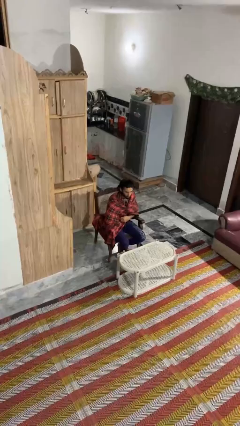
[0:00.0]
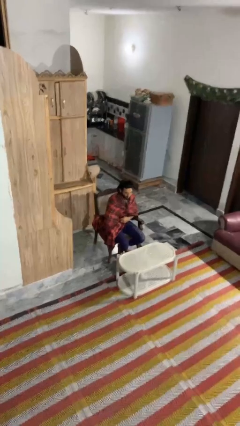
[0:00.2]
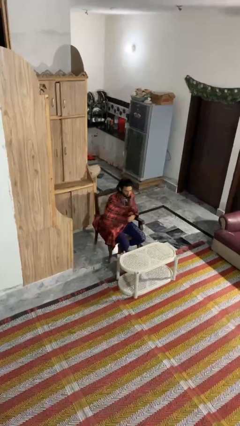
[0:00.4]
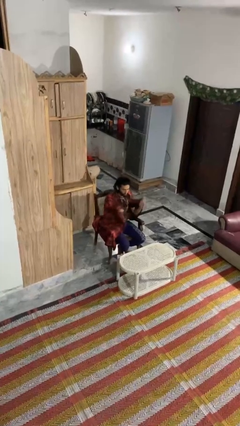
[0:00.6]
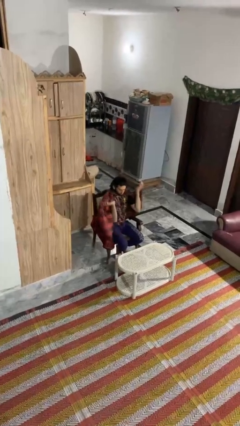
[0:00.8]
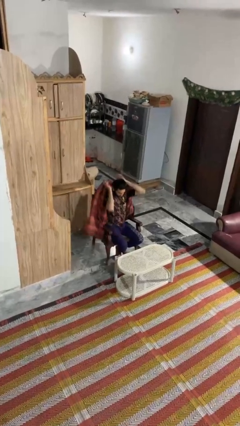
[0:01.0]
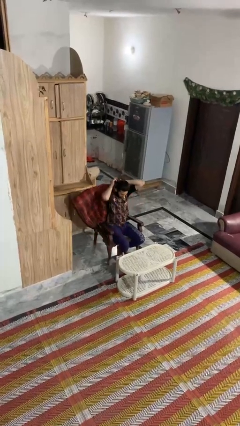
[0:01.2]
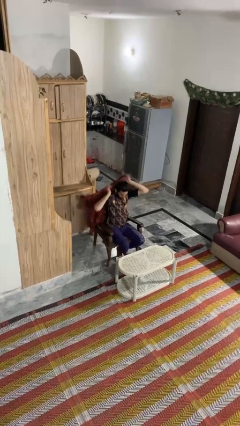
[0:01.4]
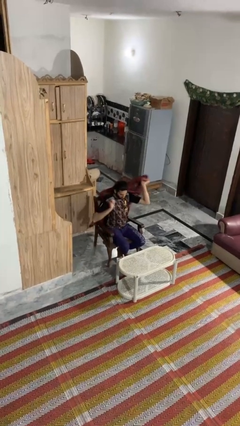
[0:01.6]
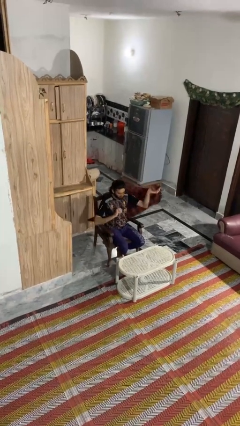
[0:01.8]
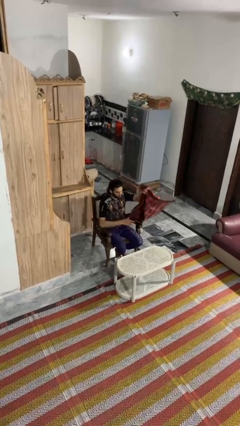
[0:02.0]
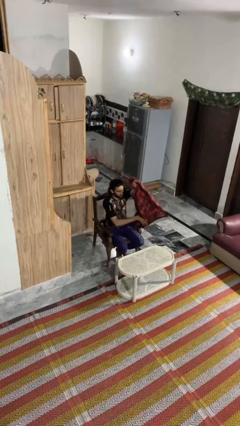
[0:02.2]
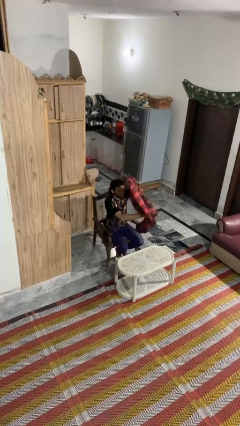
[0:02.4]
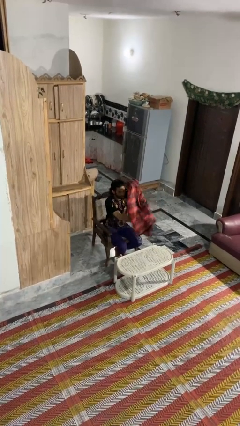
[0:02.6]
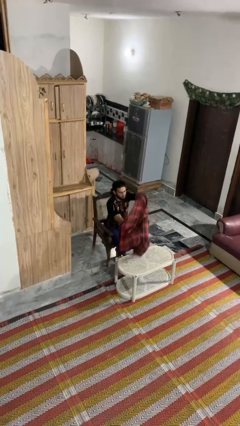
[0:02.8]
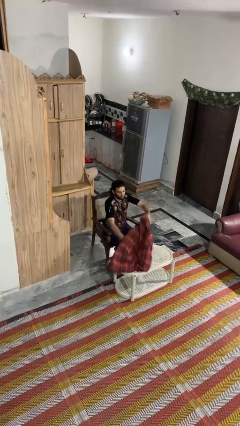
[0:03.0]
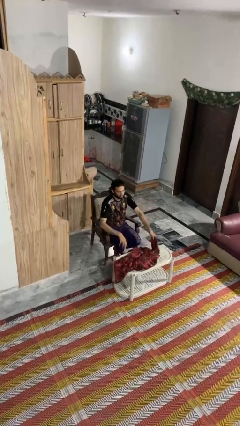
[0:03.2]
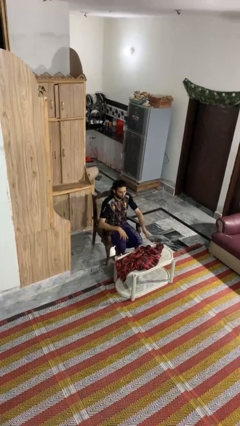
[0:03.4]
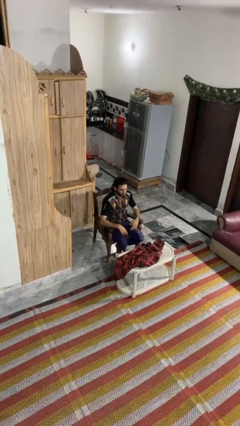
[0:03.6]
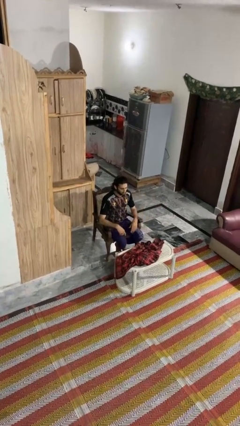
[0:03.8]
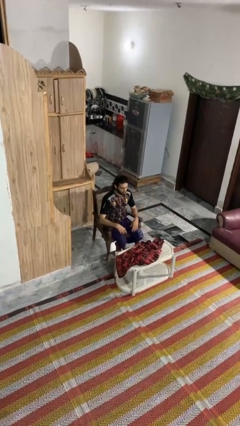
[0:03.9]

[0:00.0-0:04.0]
person uncovers with blanket

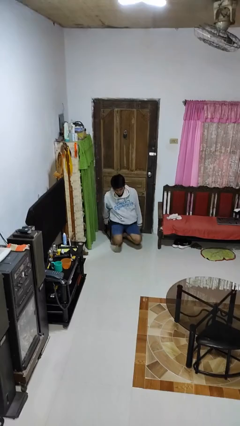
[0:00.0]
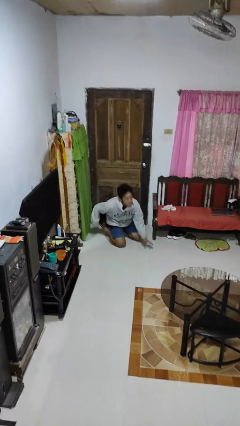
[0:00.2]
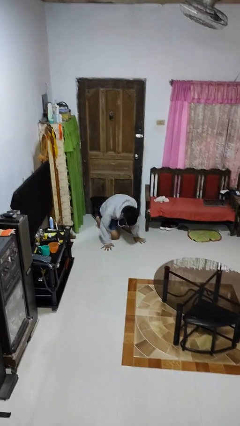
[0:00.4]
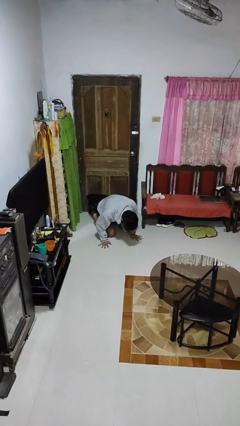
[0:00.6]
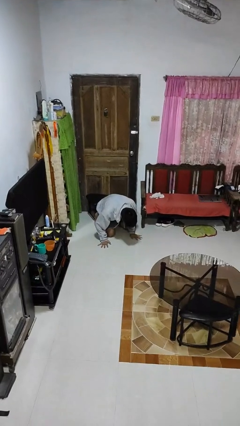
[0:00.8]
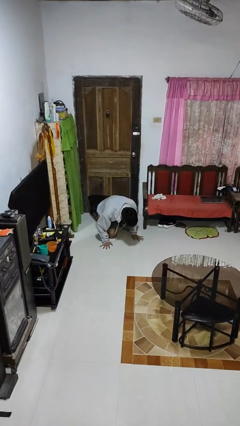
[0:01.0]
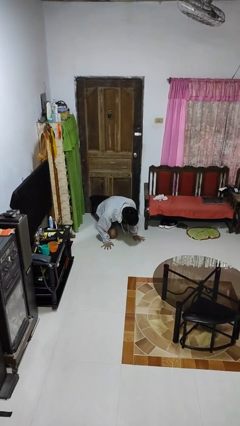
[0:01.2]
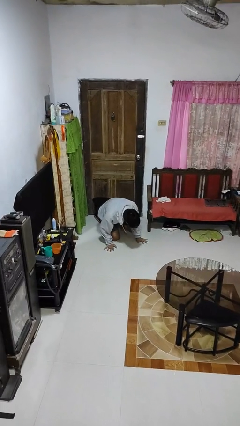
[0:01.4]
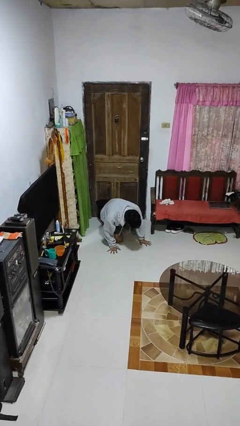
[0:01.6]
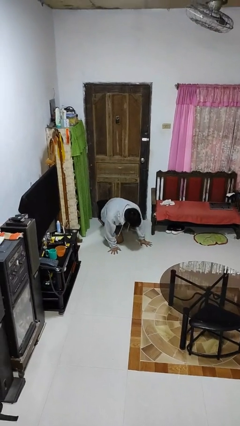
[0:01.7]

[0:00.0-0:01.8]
person falls from chair

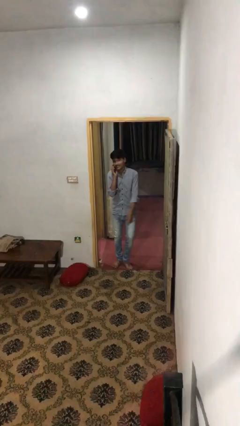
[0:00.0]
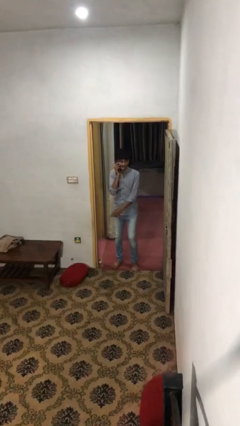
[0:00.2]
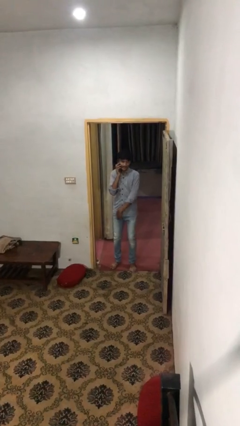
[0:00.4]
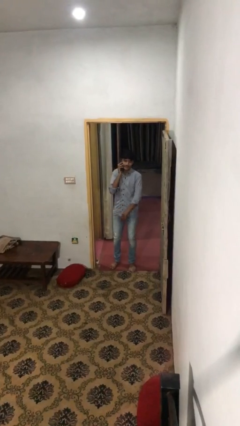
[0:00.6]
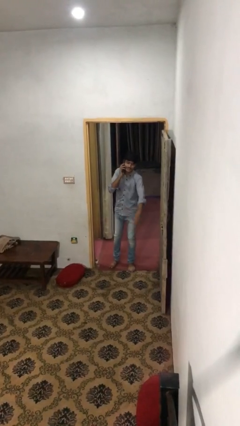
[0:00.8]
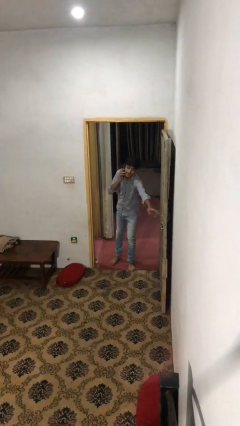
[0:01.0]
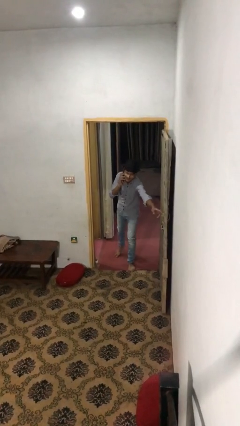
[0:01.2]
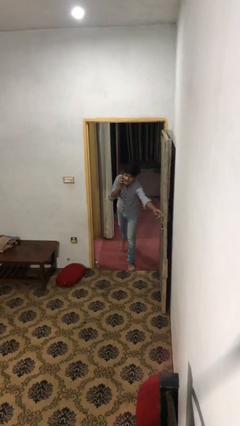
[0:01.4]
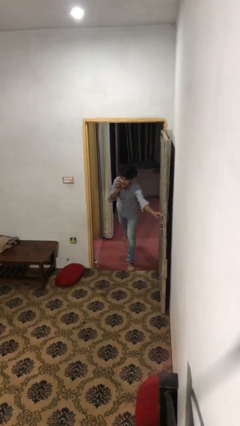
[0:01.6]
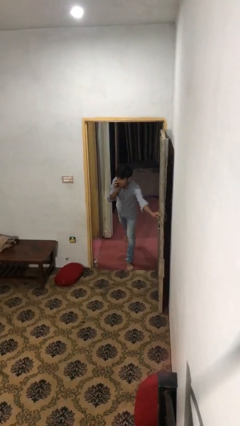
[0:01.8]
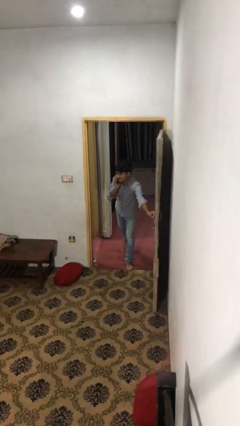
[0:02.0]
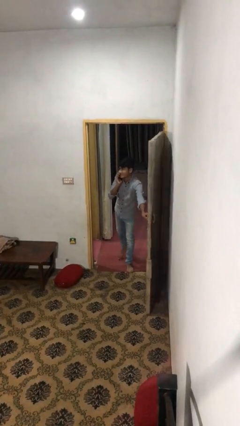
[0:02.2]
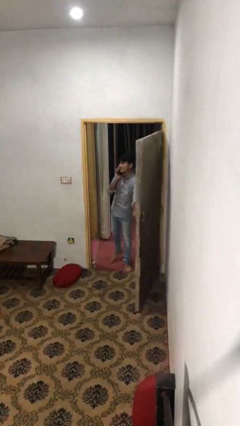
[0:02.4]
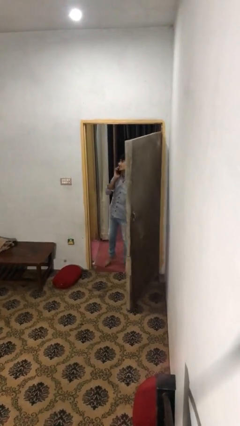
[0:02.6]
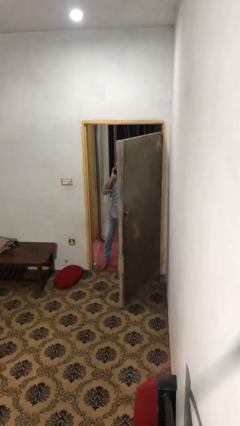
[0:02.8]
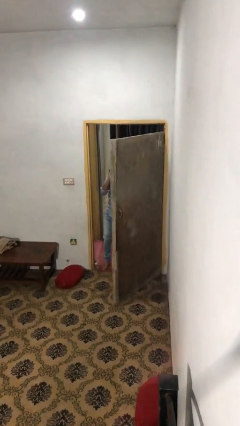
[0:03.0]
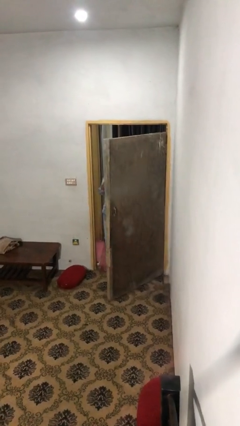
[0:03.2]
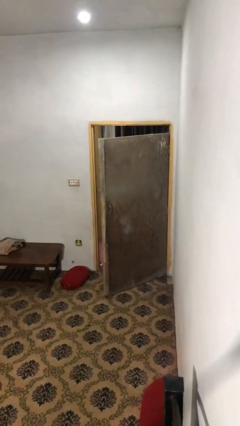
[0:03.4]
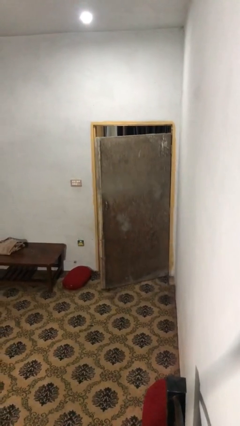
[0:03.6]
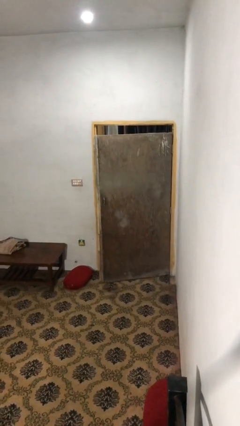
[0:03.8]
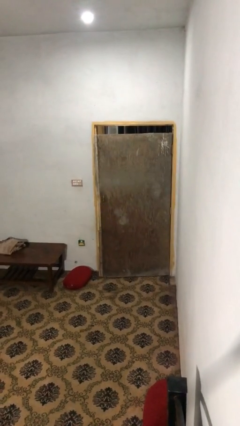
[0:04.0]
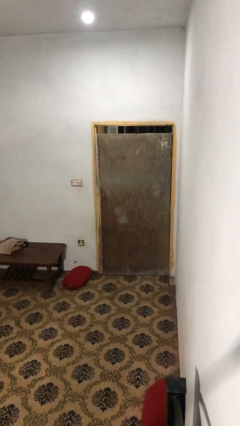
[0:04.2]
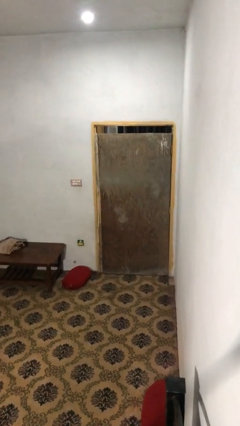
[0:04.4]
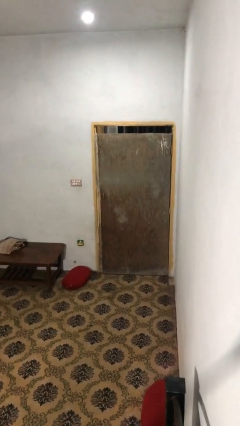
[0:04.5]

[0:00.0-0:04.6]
person closes facility door

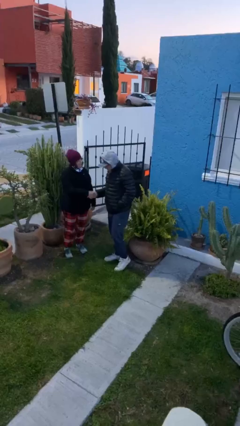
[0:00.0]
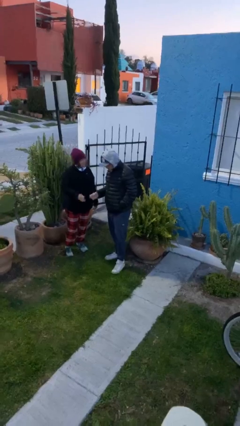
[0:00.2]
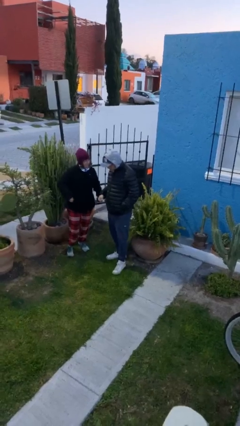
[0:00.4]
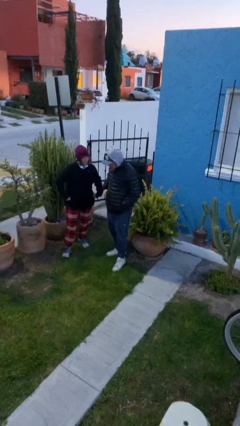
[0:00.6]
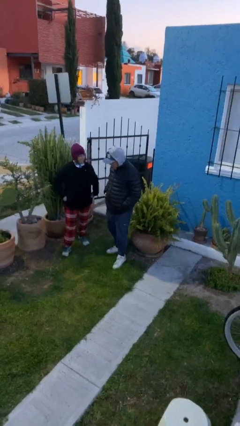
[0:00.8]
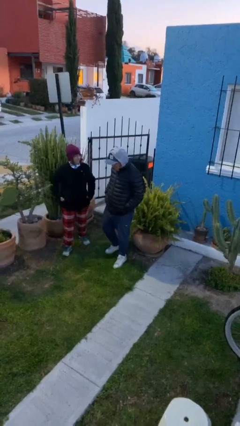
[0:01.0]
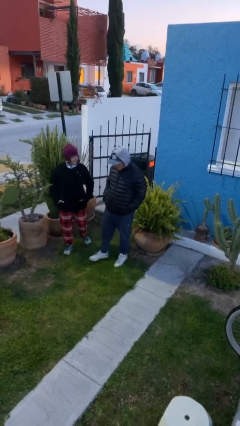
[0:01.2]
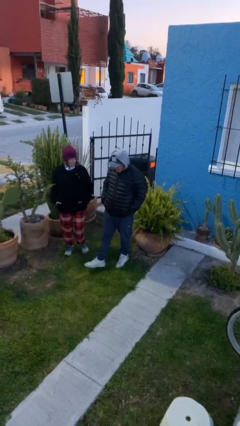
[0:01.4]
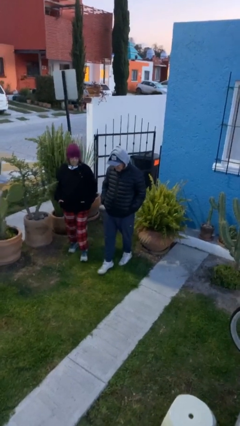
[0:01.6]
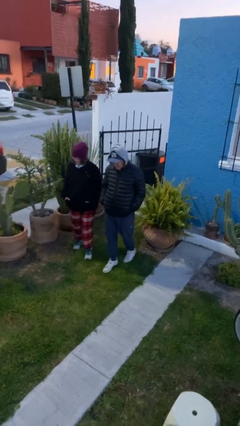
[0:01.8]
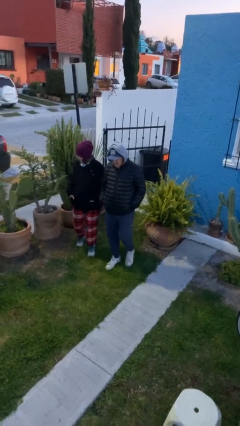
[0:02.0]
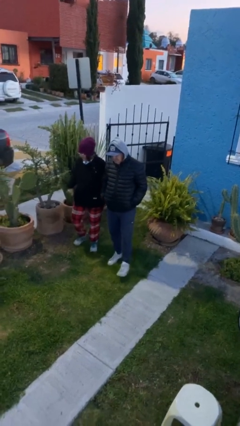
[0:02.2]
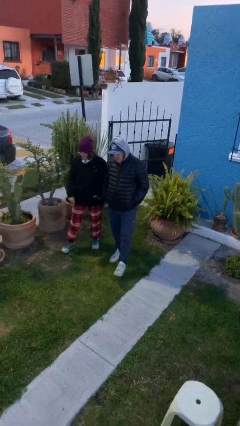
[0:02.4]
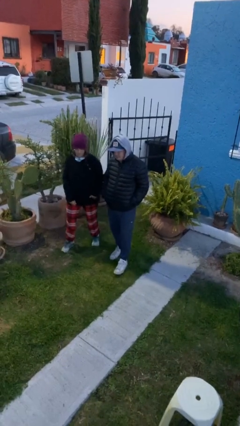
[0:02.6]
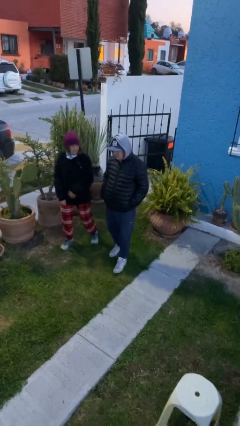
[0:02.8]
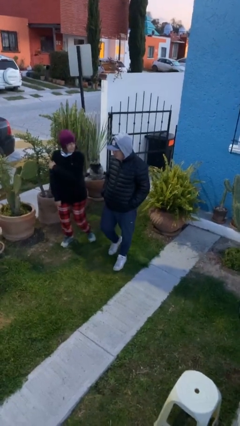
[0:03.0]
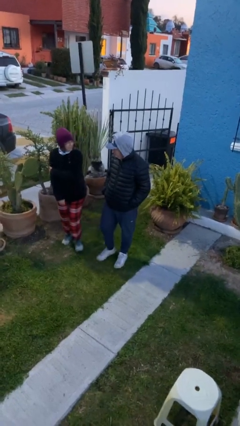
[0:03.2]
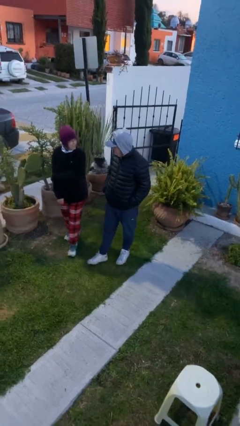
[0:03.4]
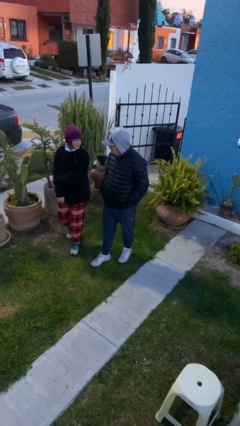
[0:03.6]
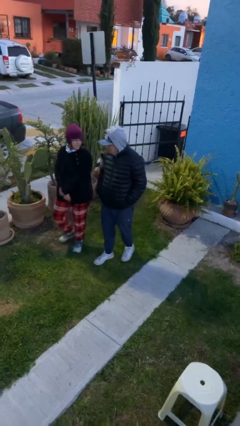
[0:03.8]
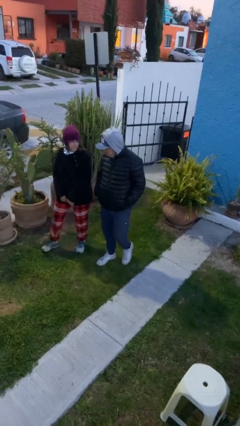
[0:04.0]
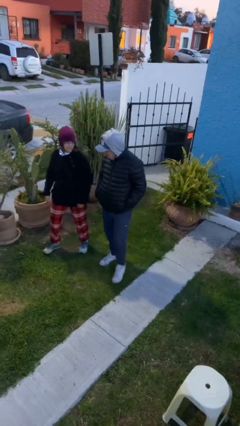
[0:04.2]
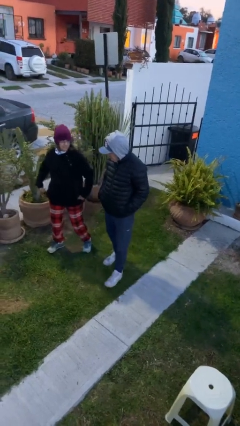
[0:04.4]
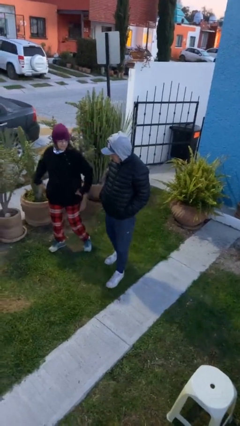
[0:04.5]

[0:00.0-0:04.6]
person talks to person

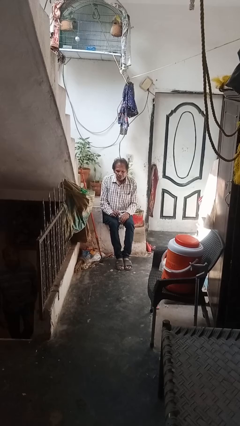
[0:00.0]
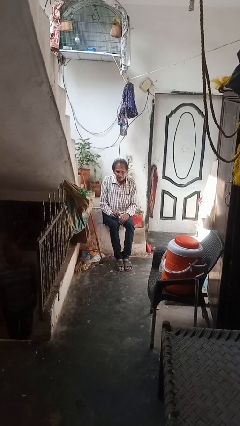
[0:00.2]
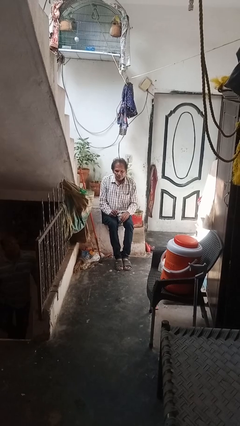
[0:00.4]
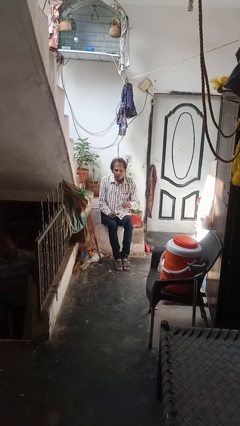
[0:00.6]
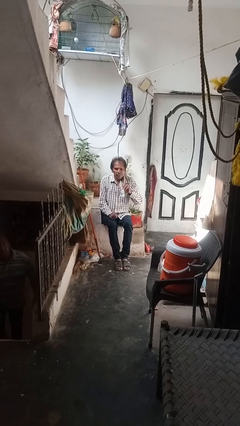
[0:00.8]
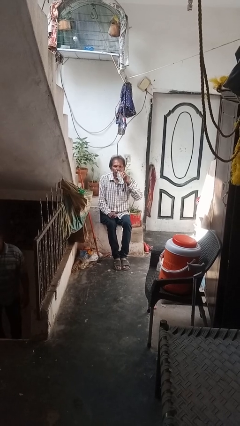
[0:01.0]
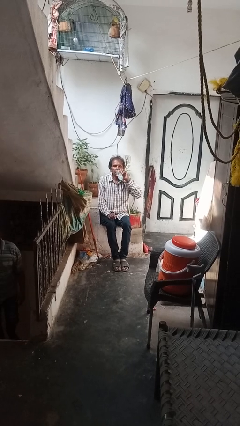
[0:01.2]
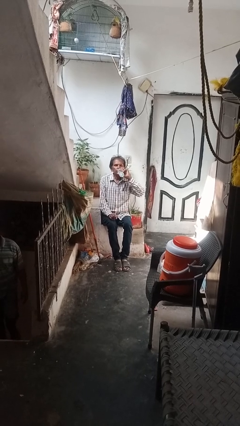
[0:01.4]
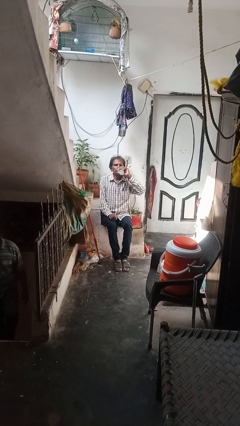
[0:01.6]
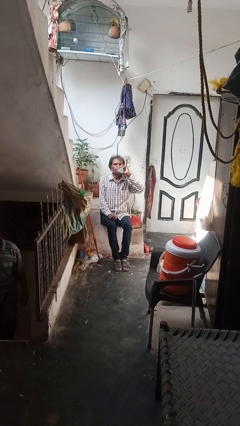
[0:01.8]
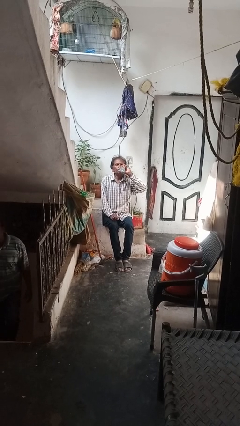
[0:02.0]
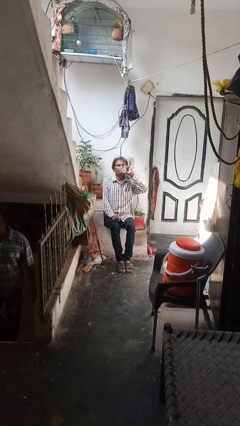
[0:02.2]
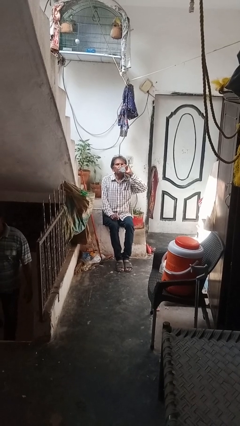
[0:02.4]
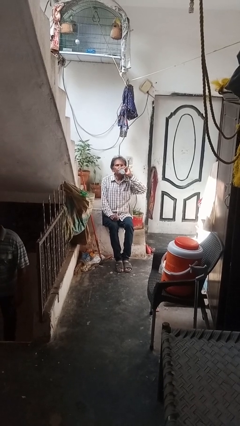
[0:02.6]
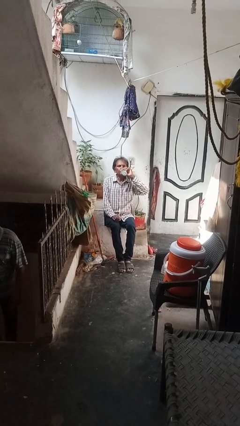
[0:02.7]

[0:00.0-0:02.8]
person drinks from bottle
